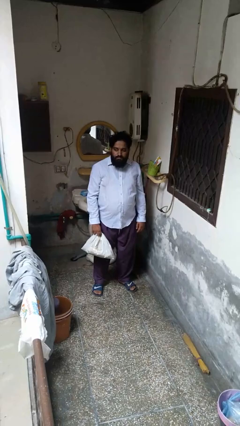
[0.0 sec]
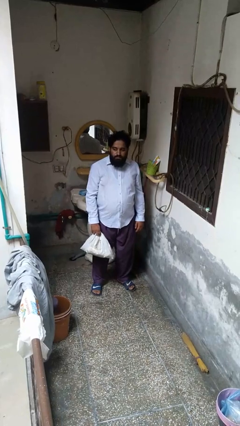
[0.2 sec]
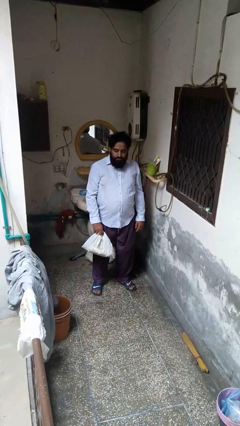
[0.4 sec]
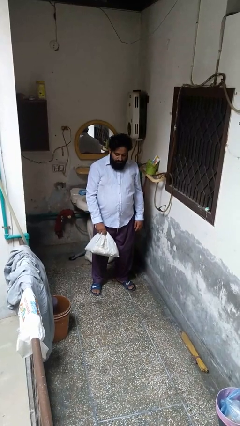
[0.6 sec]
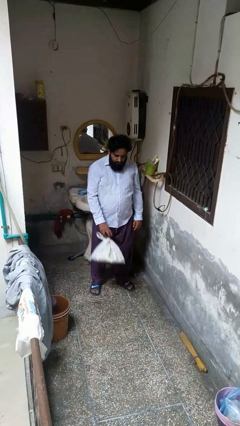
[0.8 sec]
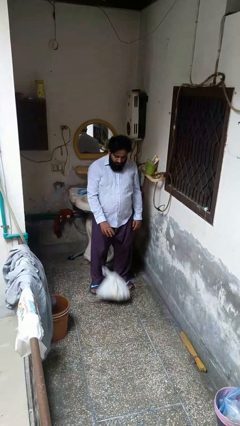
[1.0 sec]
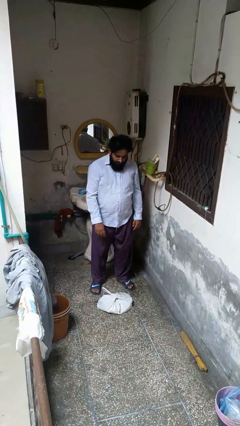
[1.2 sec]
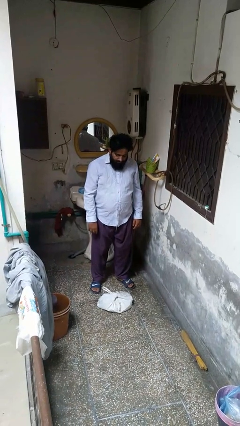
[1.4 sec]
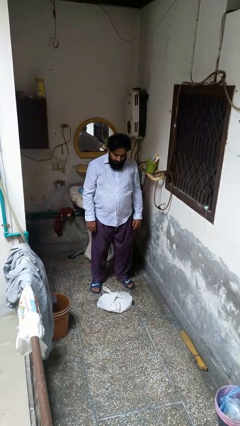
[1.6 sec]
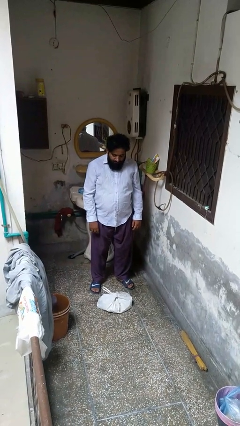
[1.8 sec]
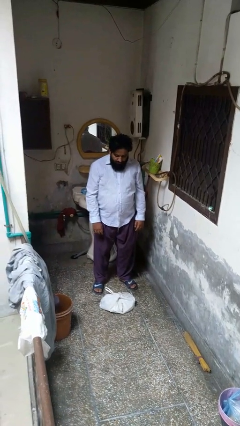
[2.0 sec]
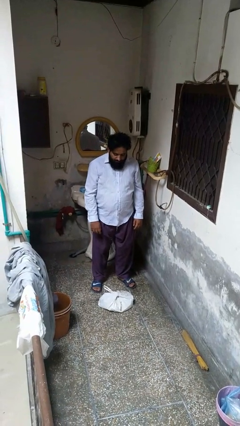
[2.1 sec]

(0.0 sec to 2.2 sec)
person throws object to ground

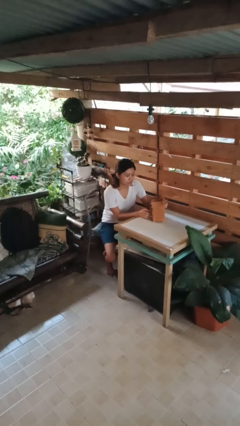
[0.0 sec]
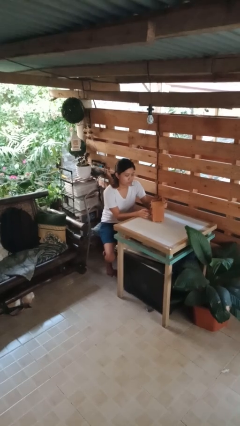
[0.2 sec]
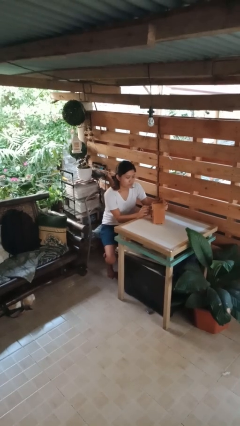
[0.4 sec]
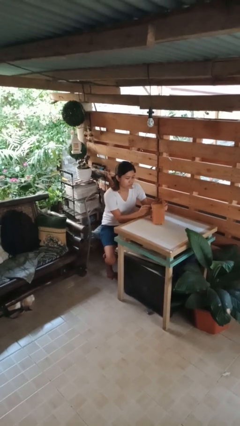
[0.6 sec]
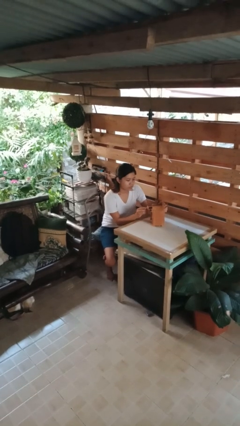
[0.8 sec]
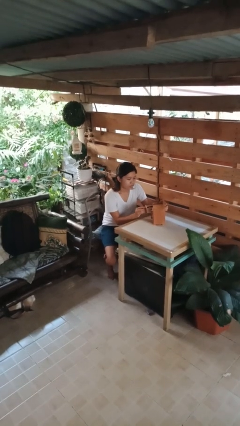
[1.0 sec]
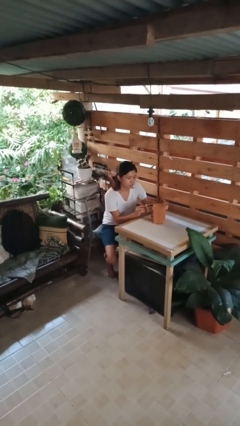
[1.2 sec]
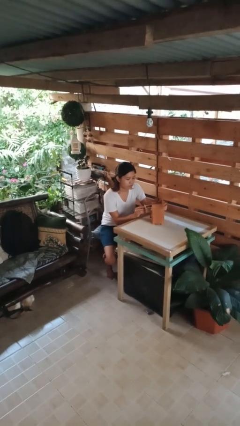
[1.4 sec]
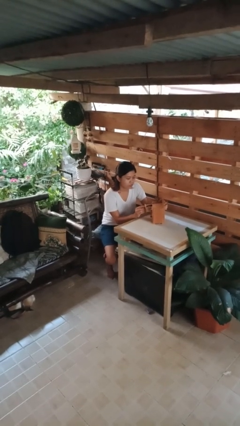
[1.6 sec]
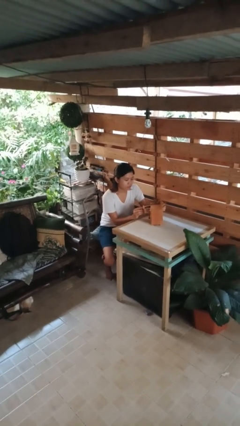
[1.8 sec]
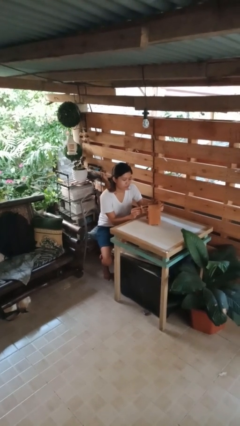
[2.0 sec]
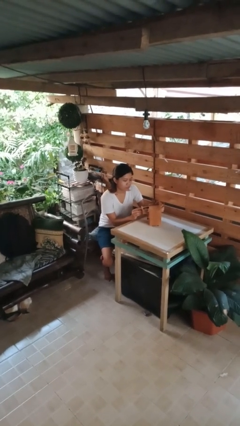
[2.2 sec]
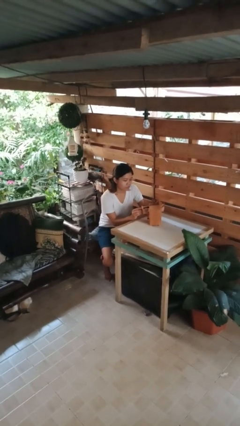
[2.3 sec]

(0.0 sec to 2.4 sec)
person opens jewelry box

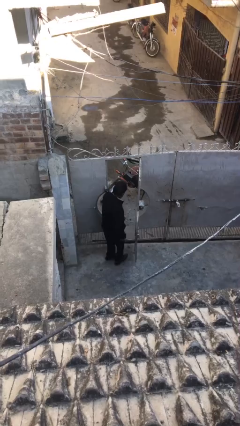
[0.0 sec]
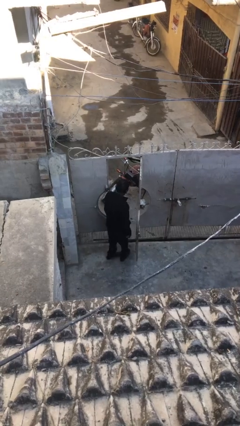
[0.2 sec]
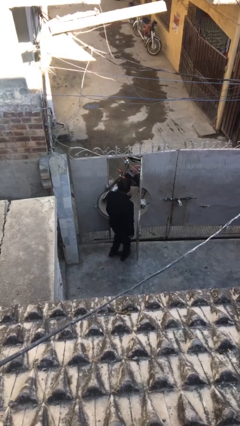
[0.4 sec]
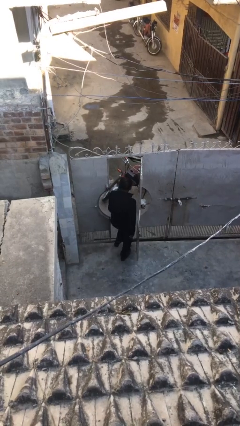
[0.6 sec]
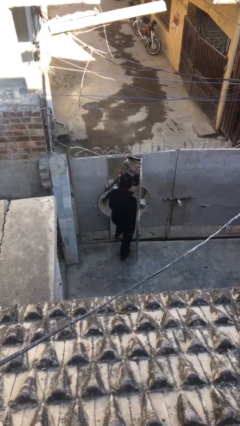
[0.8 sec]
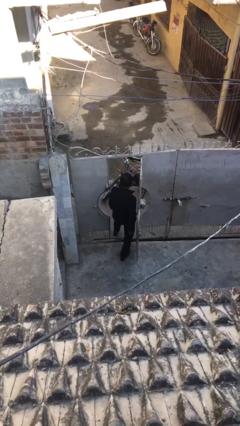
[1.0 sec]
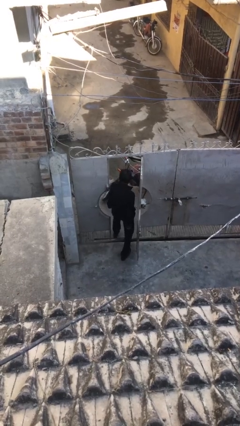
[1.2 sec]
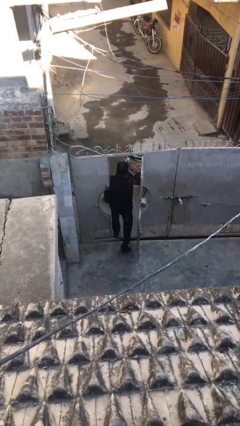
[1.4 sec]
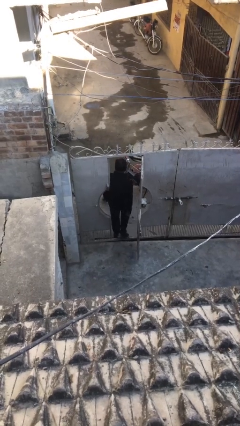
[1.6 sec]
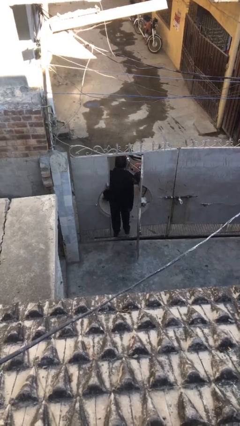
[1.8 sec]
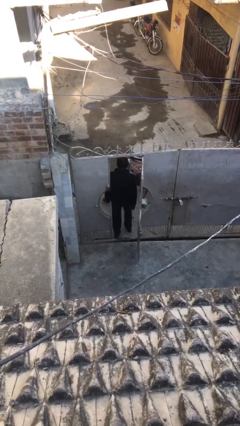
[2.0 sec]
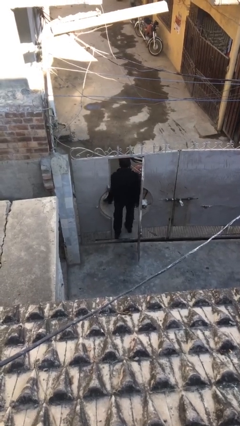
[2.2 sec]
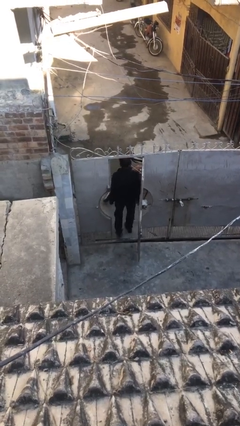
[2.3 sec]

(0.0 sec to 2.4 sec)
person exits scene through structure

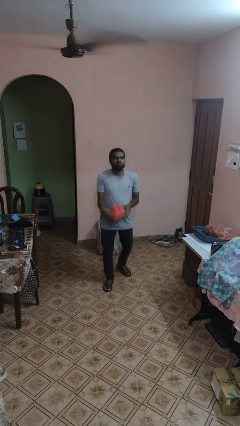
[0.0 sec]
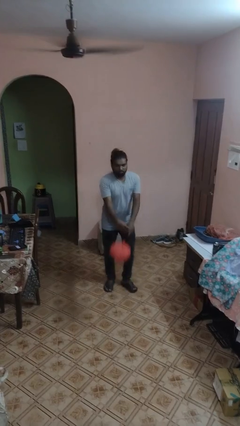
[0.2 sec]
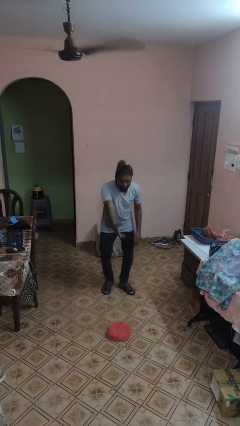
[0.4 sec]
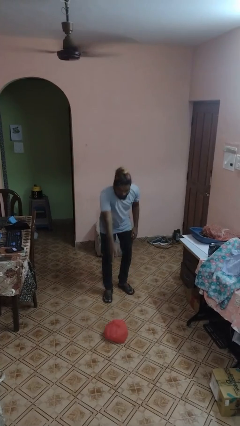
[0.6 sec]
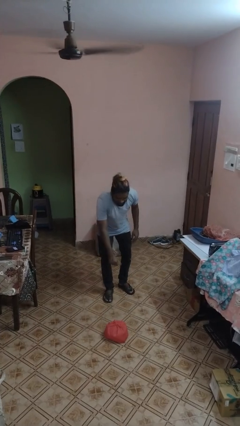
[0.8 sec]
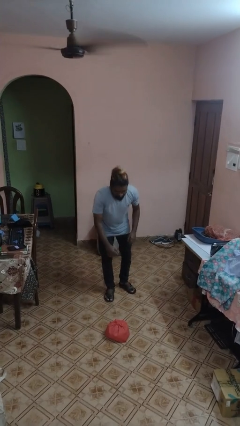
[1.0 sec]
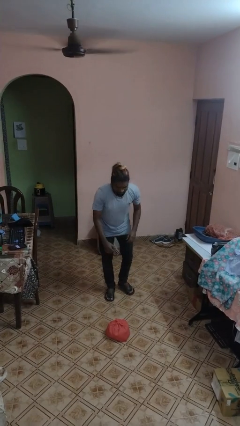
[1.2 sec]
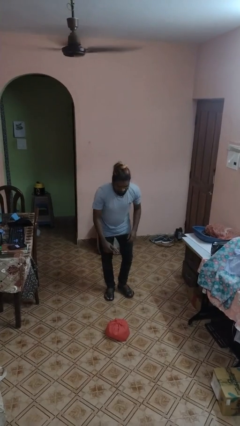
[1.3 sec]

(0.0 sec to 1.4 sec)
person drops object

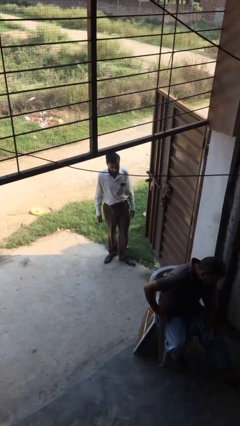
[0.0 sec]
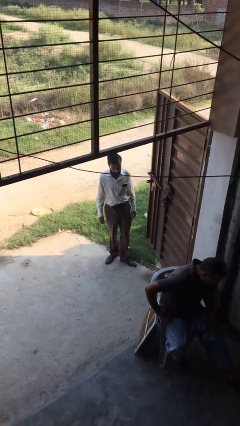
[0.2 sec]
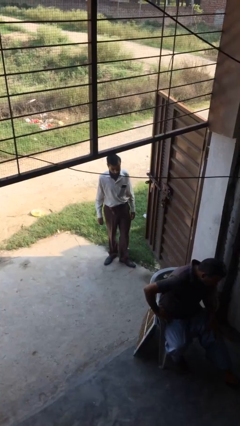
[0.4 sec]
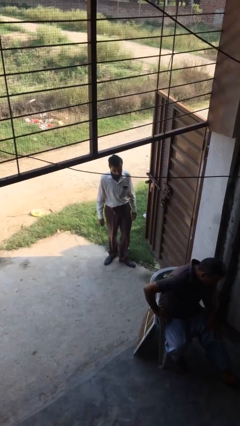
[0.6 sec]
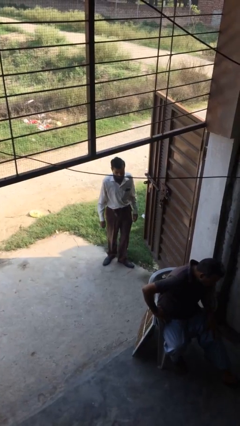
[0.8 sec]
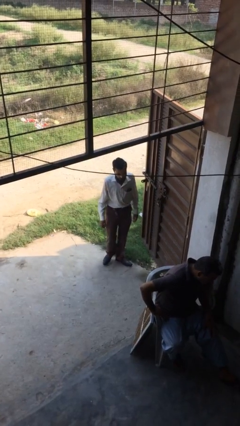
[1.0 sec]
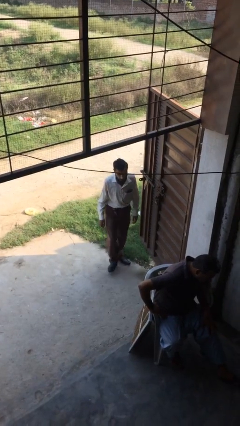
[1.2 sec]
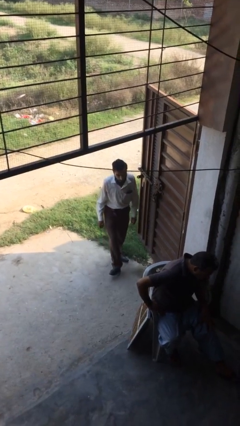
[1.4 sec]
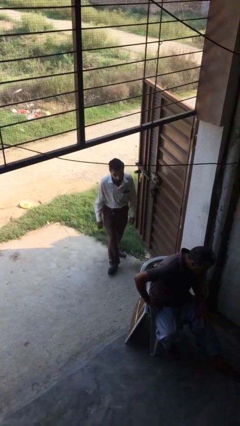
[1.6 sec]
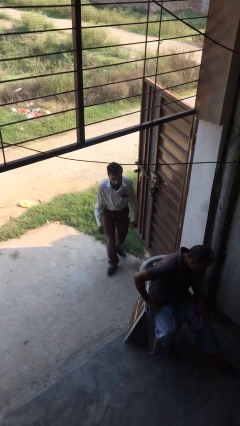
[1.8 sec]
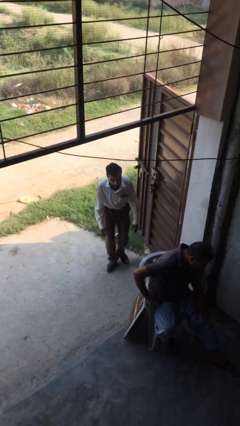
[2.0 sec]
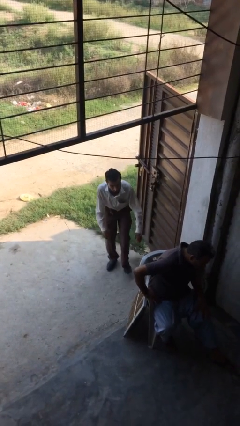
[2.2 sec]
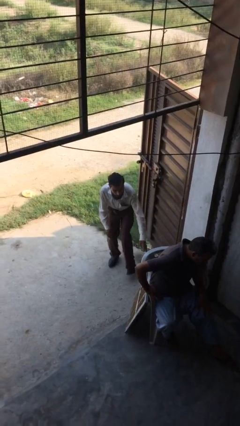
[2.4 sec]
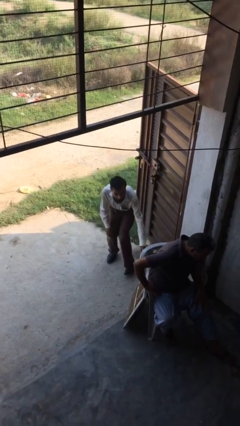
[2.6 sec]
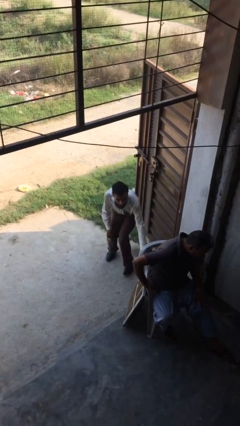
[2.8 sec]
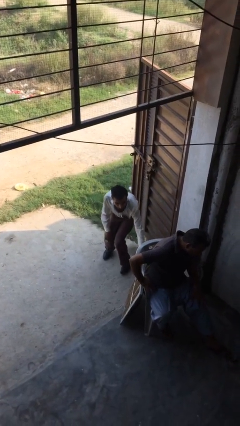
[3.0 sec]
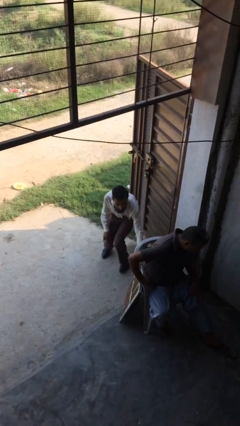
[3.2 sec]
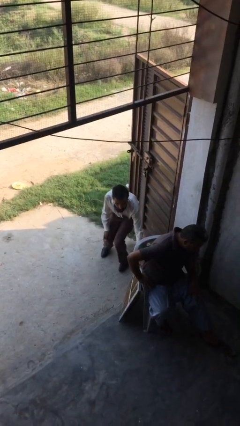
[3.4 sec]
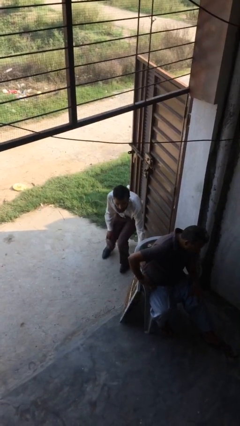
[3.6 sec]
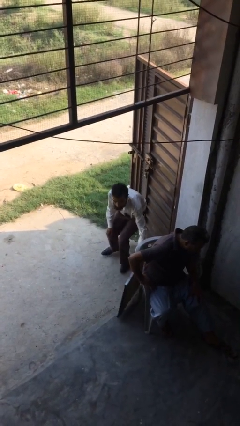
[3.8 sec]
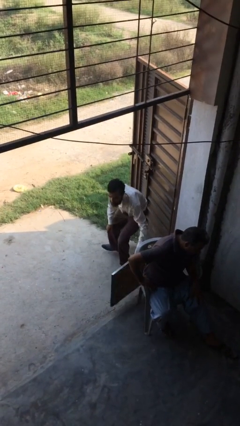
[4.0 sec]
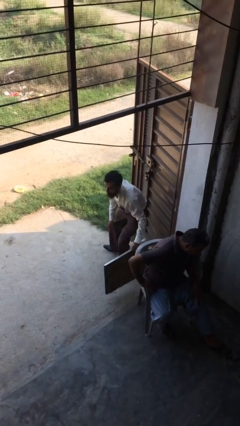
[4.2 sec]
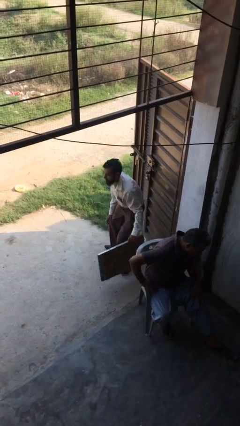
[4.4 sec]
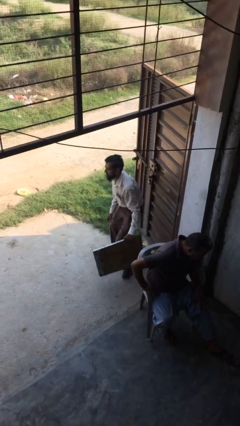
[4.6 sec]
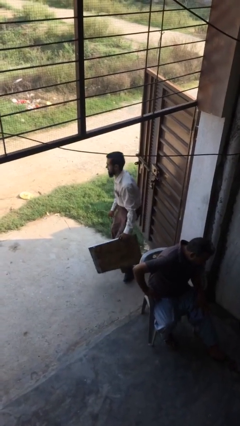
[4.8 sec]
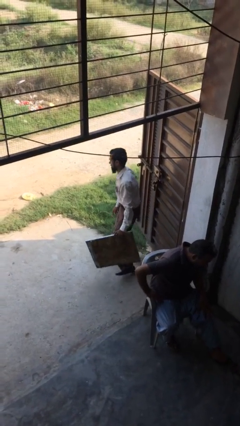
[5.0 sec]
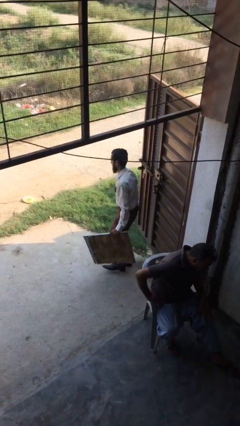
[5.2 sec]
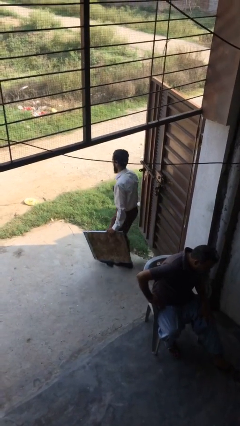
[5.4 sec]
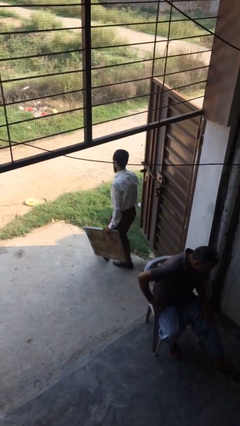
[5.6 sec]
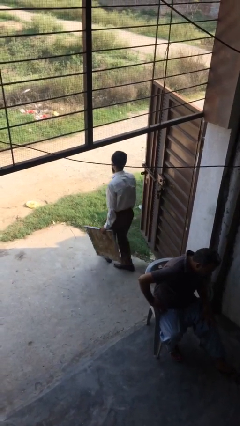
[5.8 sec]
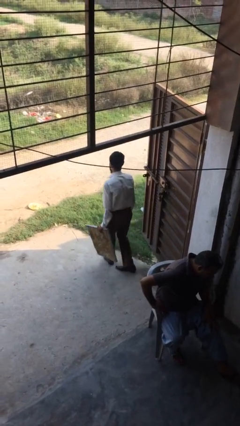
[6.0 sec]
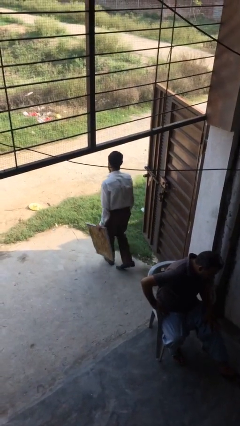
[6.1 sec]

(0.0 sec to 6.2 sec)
person steals object from person

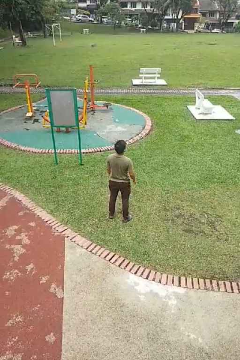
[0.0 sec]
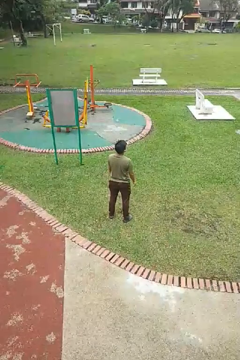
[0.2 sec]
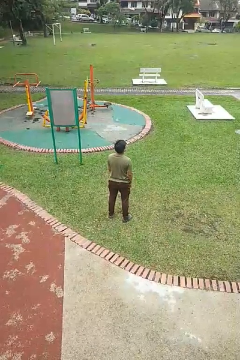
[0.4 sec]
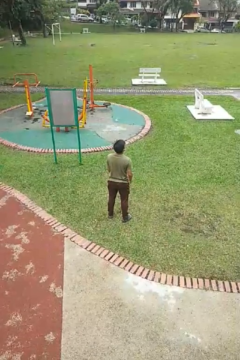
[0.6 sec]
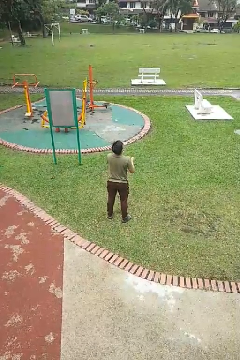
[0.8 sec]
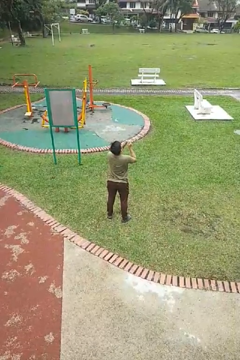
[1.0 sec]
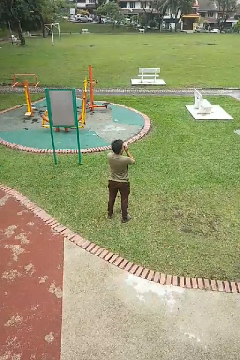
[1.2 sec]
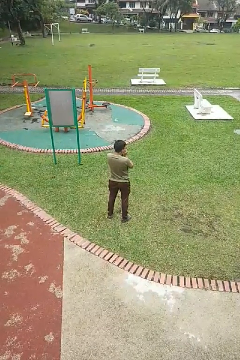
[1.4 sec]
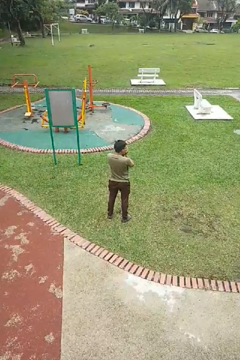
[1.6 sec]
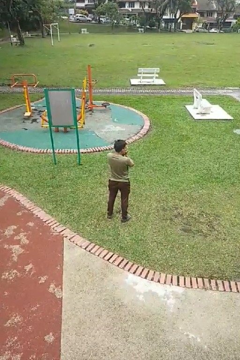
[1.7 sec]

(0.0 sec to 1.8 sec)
person sneezes into hand

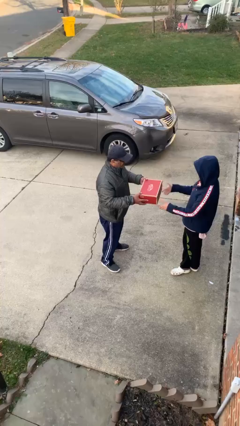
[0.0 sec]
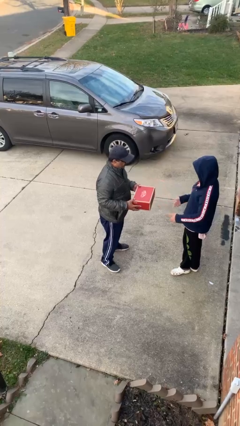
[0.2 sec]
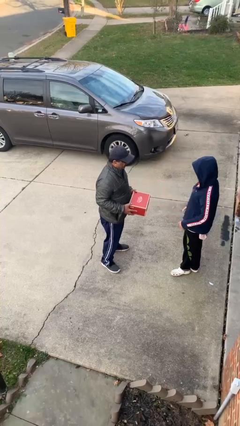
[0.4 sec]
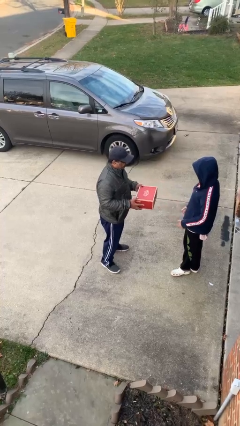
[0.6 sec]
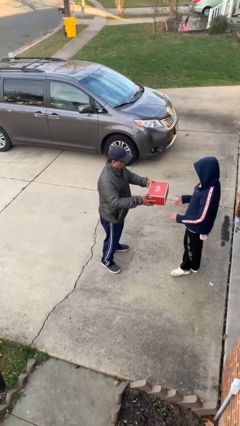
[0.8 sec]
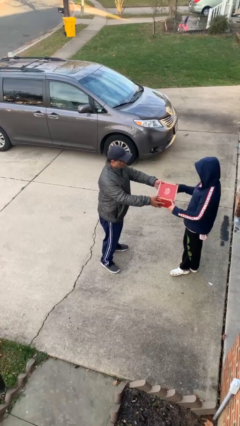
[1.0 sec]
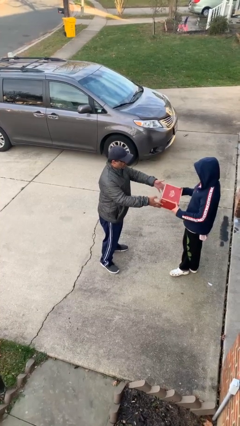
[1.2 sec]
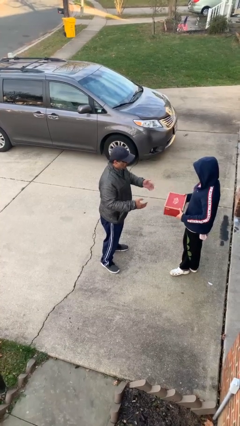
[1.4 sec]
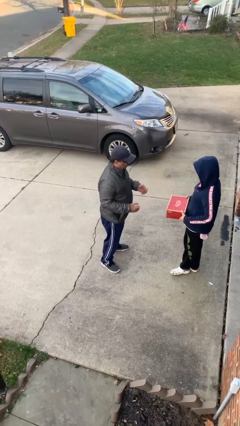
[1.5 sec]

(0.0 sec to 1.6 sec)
person transfers object to person
